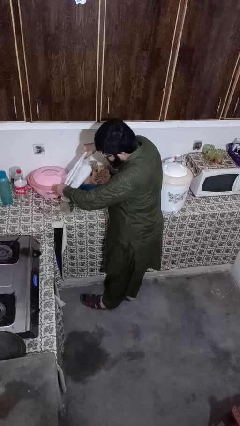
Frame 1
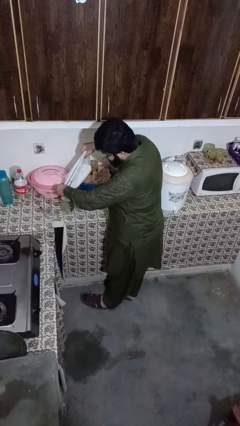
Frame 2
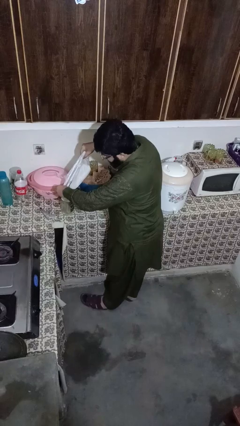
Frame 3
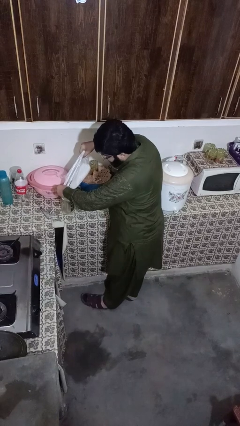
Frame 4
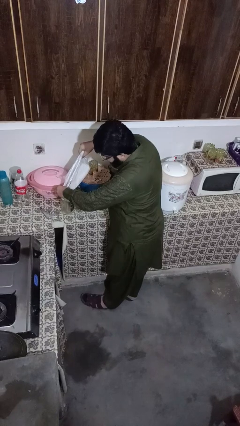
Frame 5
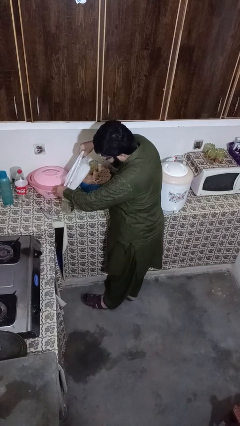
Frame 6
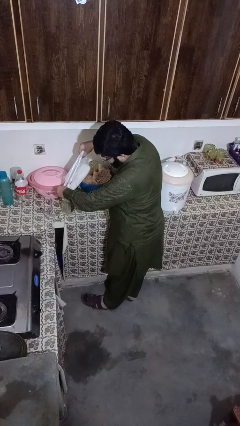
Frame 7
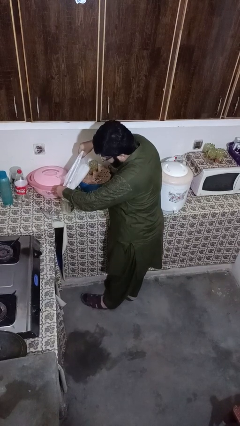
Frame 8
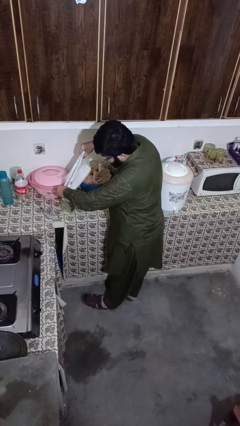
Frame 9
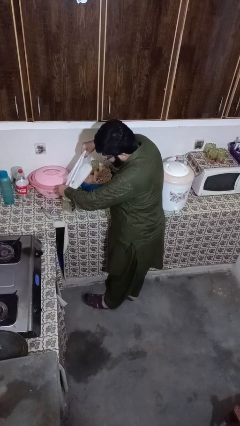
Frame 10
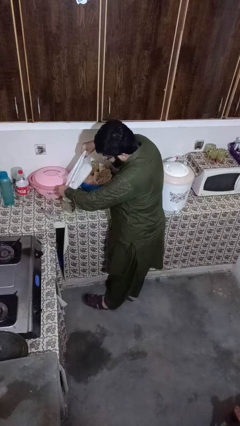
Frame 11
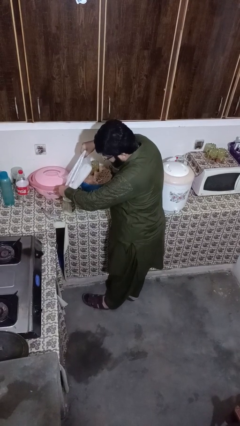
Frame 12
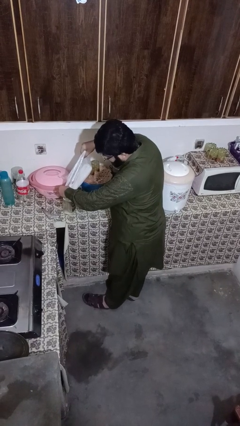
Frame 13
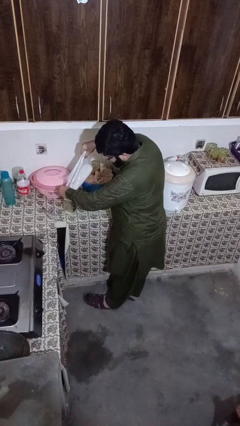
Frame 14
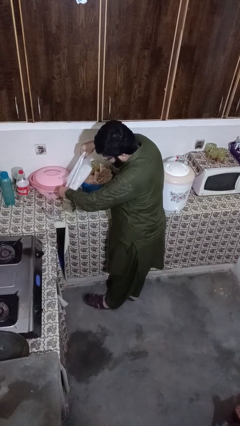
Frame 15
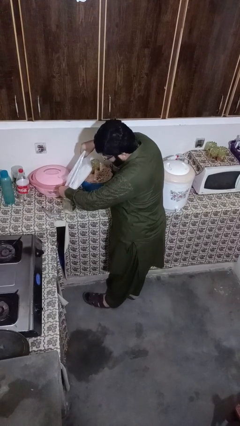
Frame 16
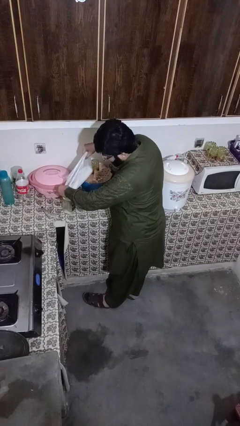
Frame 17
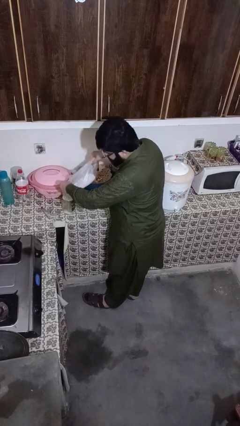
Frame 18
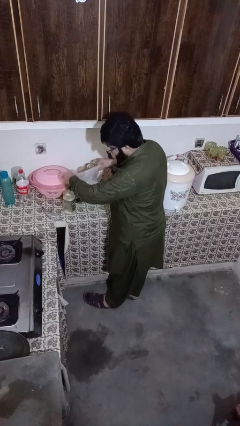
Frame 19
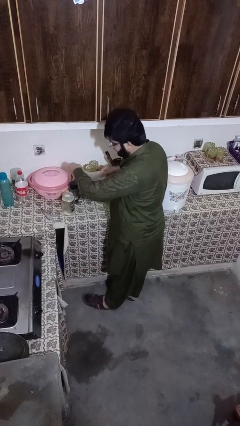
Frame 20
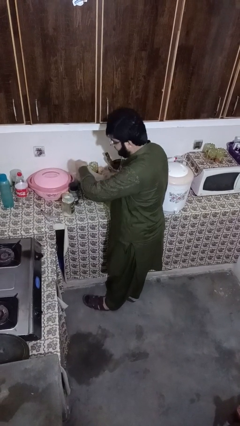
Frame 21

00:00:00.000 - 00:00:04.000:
person pours into bowl

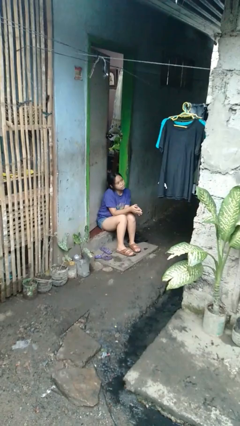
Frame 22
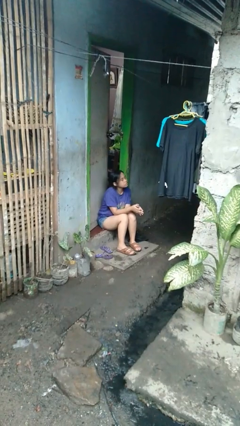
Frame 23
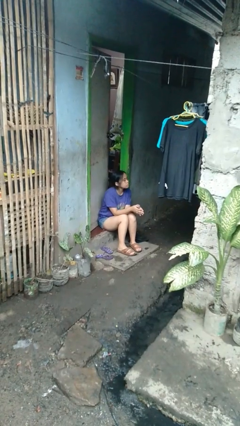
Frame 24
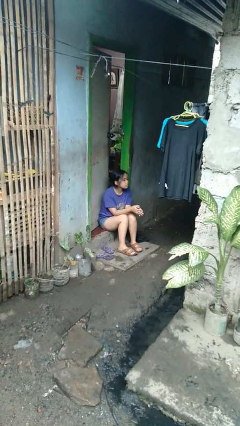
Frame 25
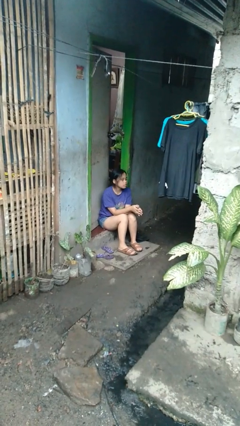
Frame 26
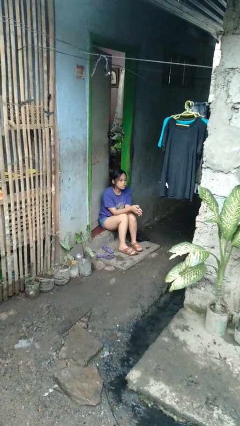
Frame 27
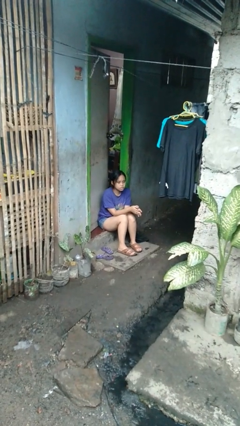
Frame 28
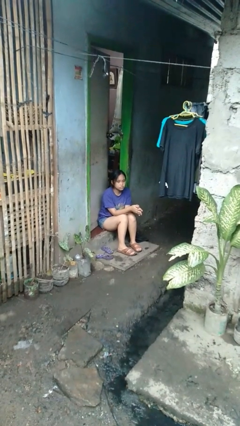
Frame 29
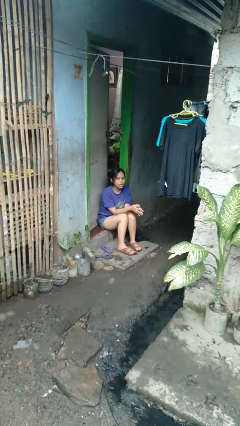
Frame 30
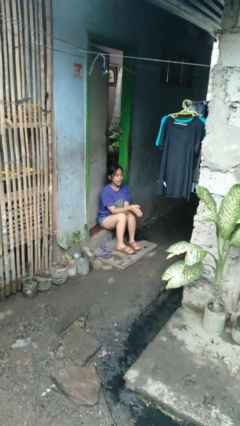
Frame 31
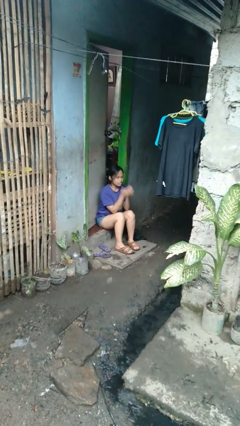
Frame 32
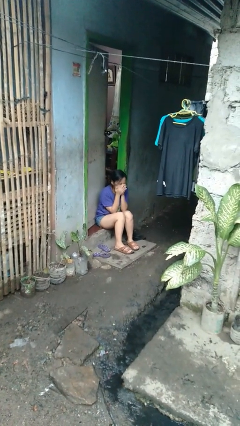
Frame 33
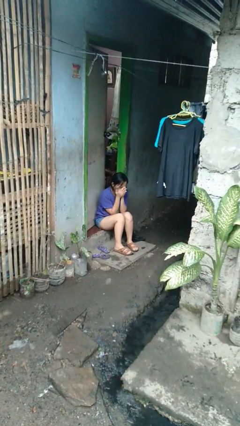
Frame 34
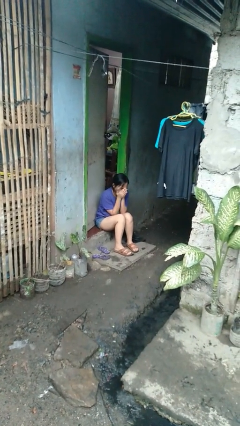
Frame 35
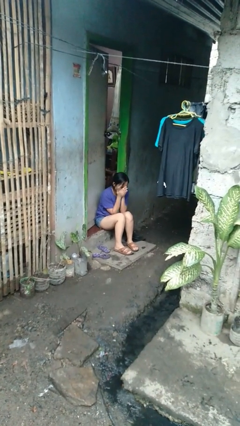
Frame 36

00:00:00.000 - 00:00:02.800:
person sneezes into hand

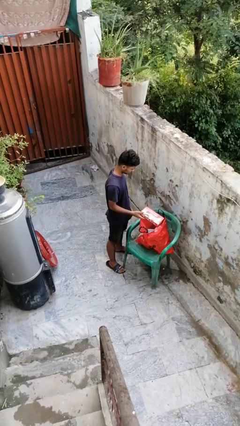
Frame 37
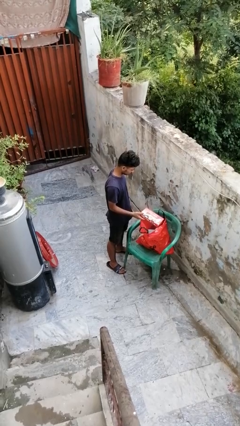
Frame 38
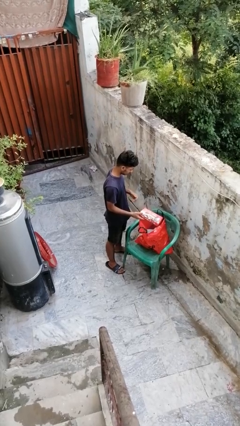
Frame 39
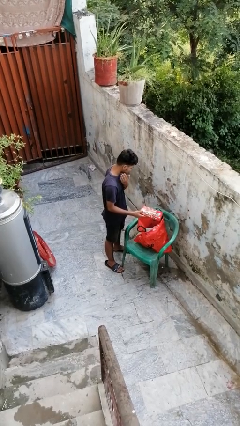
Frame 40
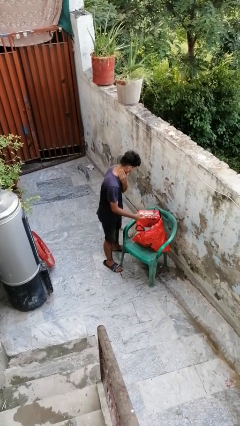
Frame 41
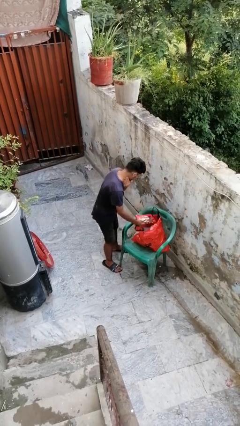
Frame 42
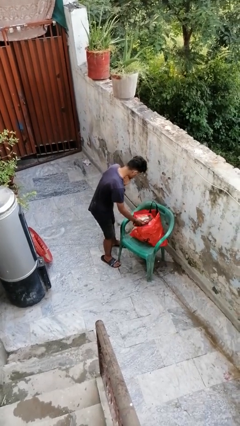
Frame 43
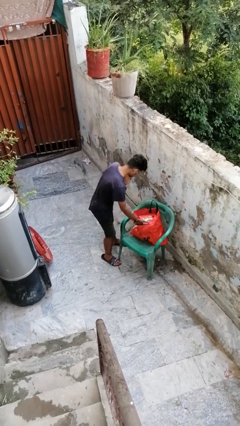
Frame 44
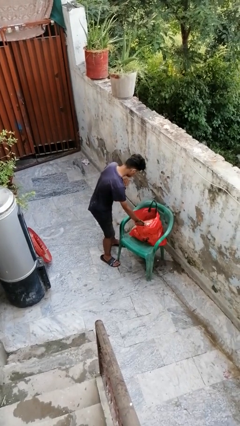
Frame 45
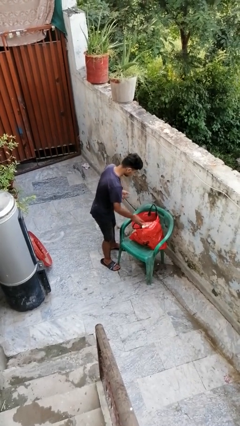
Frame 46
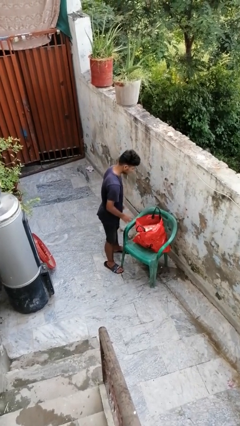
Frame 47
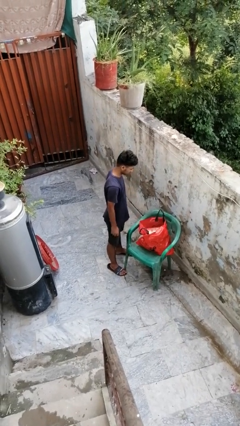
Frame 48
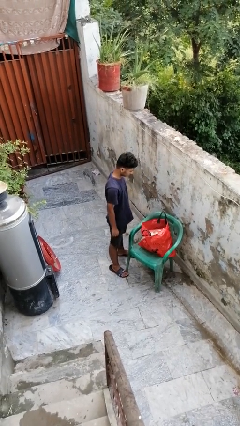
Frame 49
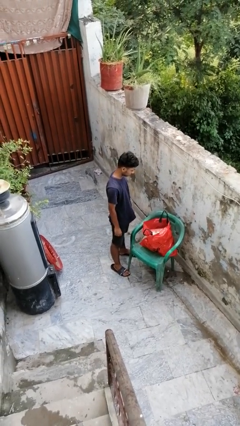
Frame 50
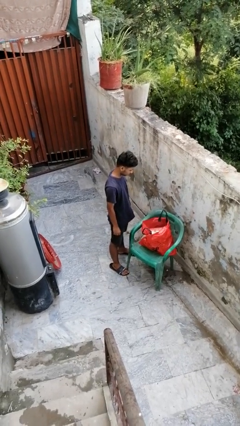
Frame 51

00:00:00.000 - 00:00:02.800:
person puts object into bag

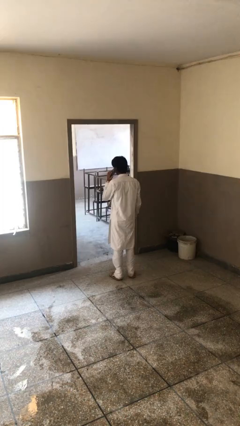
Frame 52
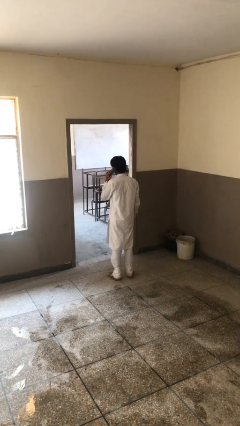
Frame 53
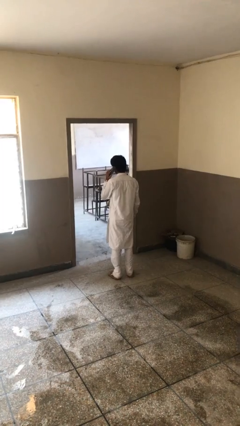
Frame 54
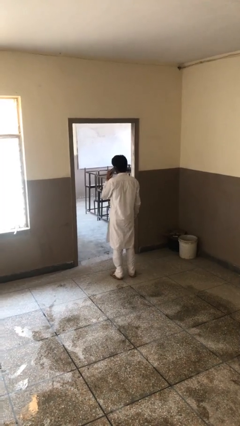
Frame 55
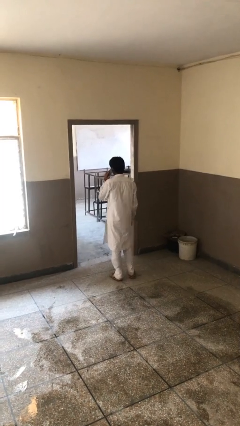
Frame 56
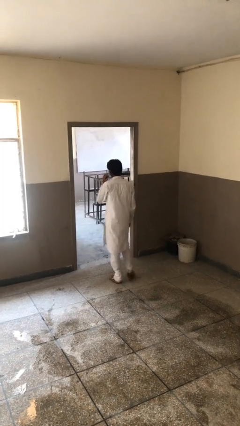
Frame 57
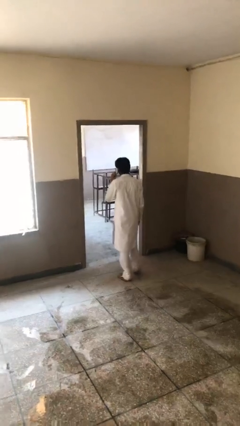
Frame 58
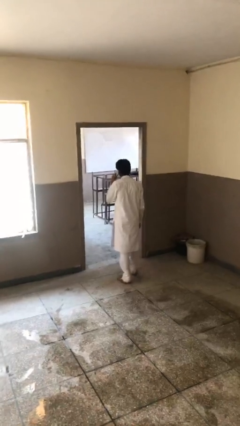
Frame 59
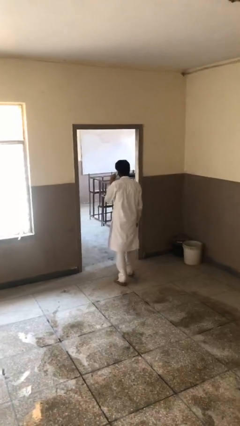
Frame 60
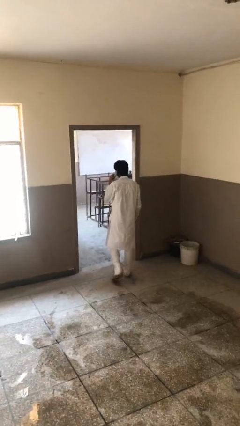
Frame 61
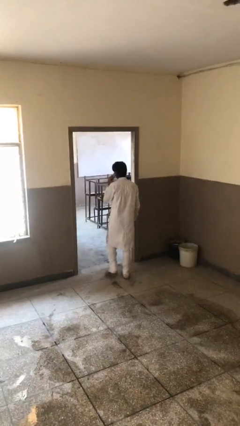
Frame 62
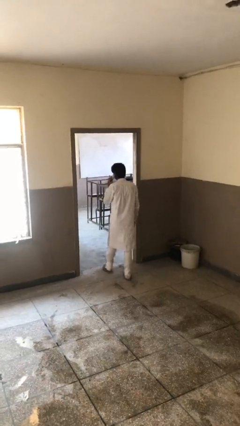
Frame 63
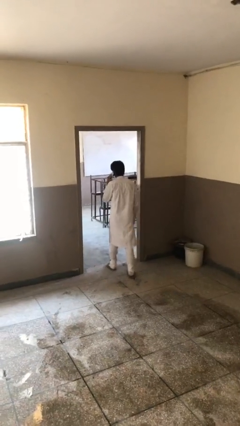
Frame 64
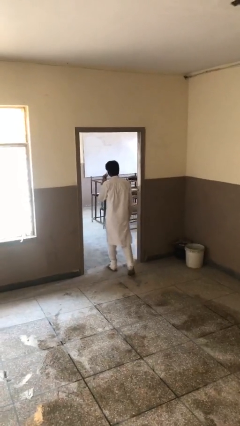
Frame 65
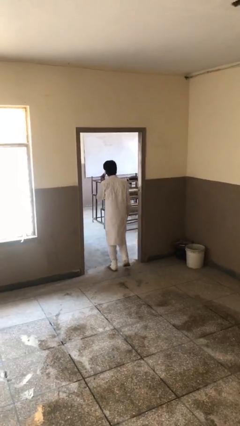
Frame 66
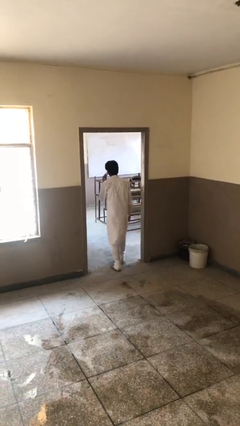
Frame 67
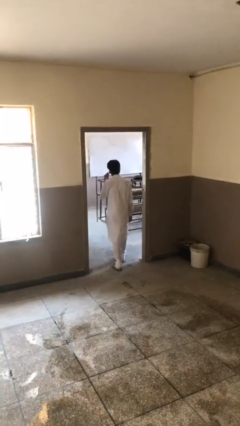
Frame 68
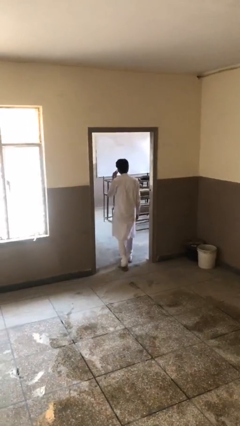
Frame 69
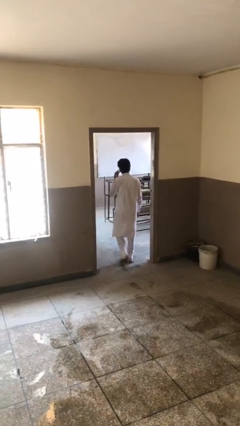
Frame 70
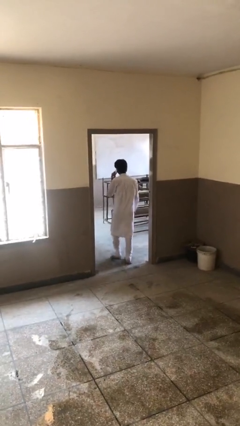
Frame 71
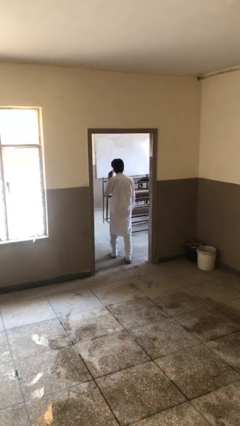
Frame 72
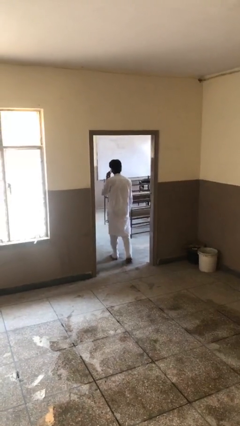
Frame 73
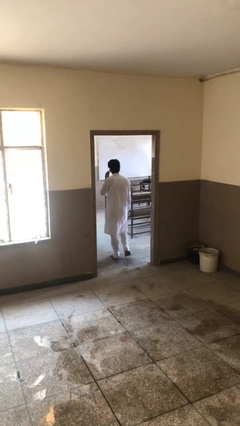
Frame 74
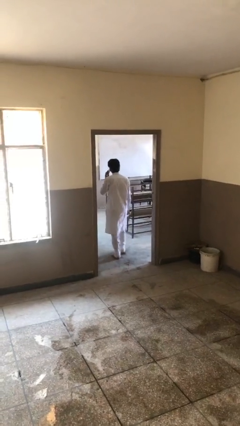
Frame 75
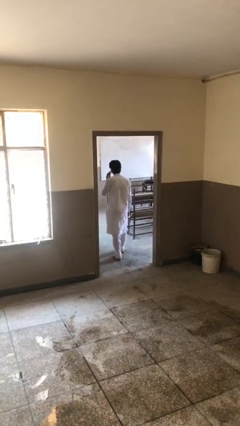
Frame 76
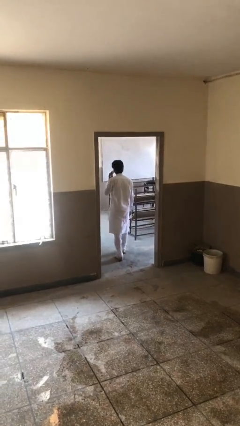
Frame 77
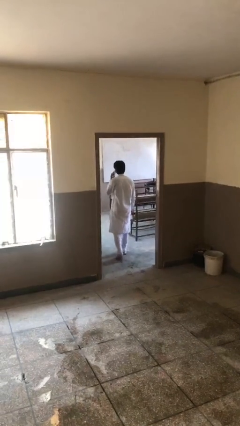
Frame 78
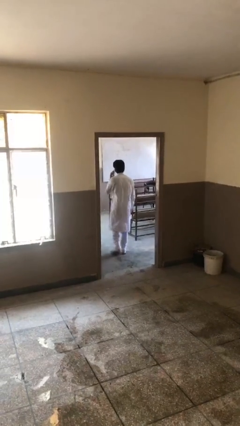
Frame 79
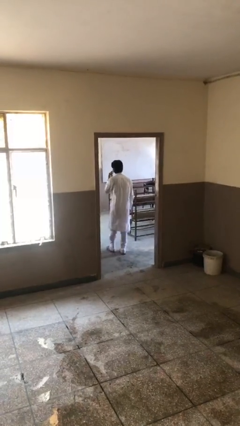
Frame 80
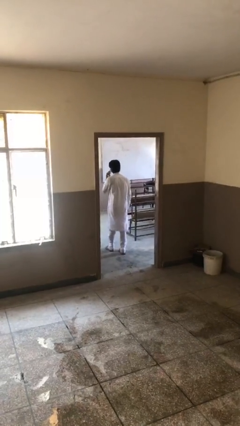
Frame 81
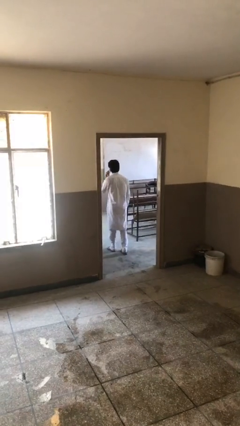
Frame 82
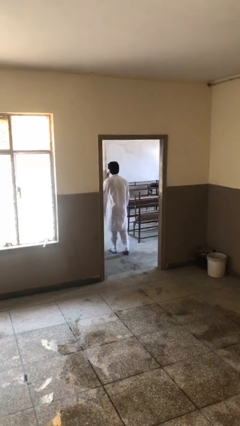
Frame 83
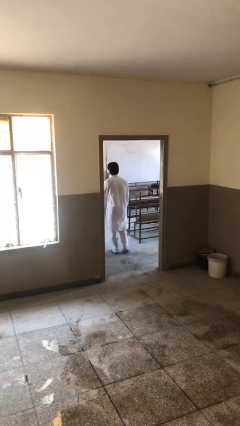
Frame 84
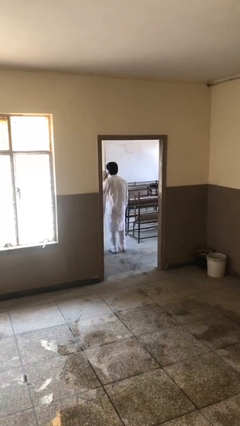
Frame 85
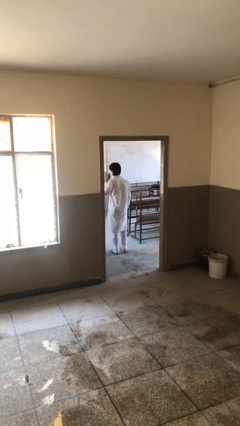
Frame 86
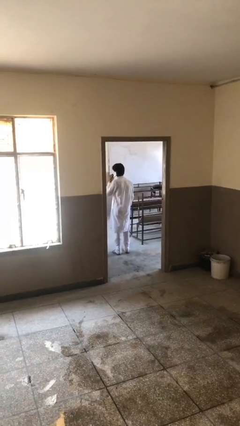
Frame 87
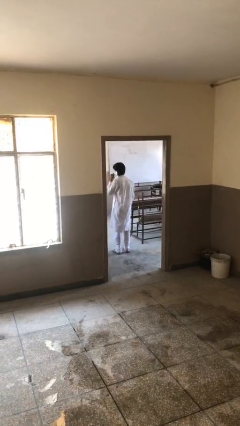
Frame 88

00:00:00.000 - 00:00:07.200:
person exits scene through structure

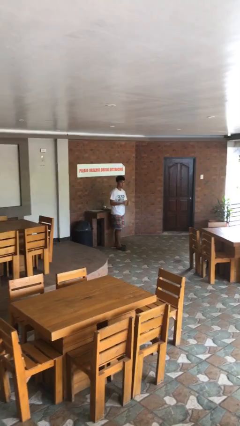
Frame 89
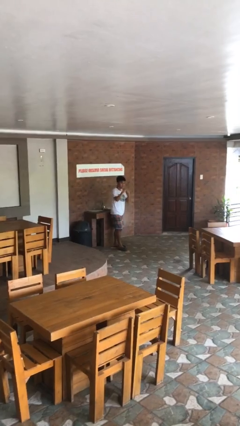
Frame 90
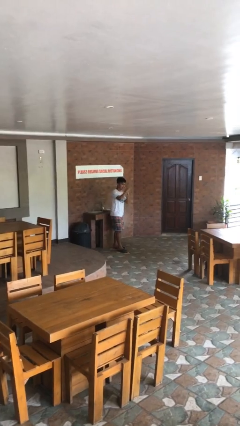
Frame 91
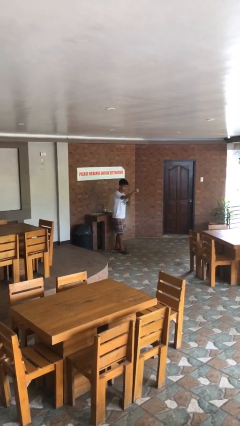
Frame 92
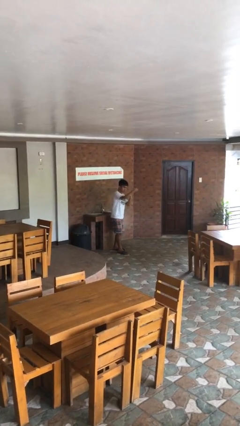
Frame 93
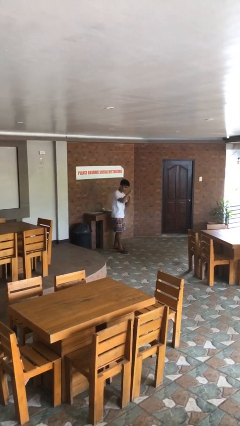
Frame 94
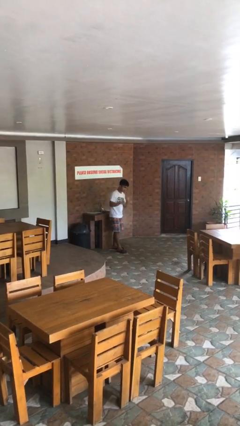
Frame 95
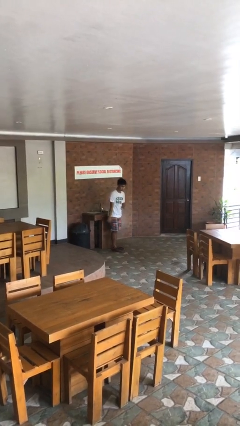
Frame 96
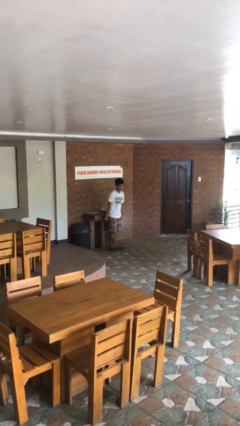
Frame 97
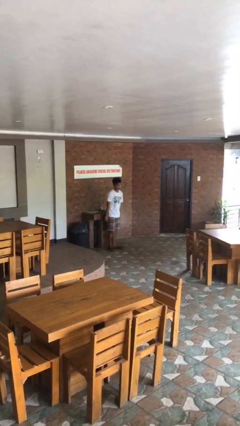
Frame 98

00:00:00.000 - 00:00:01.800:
person punches
